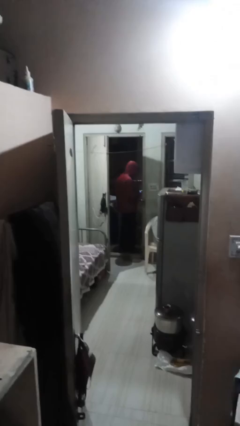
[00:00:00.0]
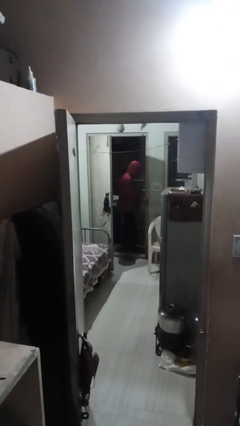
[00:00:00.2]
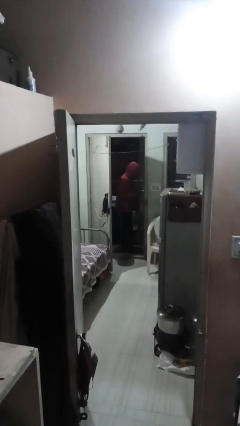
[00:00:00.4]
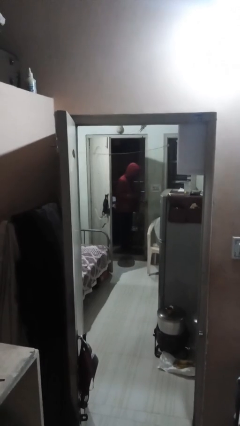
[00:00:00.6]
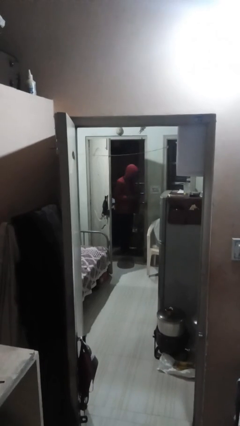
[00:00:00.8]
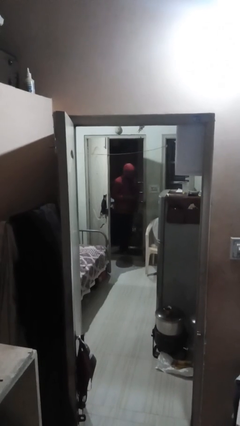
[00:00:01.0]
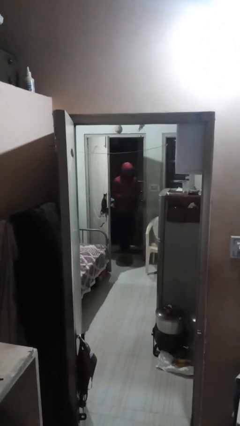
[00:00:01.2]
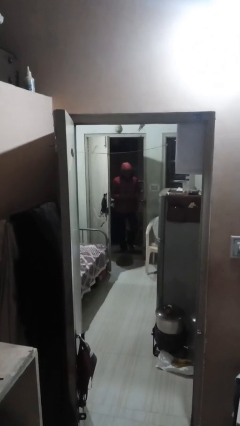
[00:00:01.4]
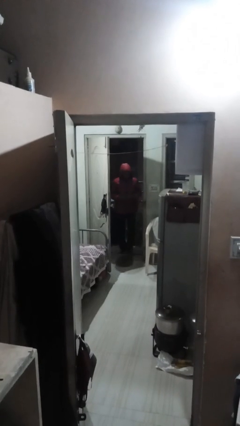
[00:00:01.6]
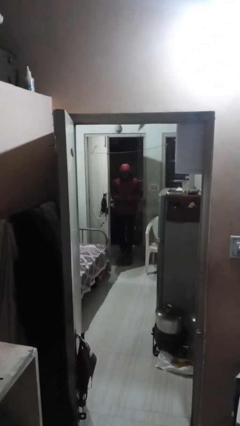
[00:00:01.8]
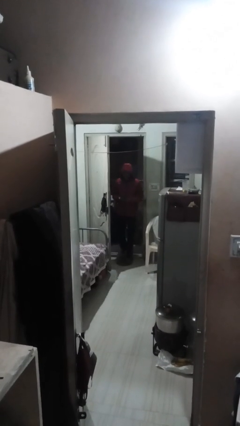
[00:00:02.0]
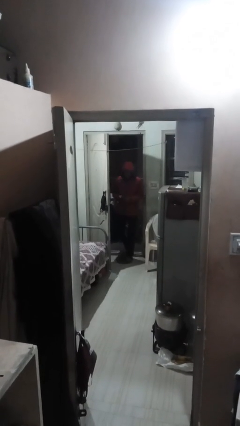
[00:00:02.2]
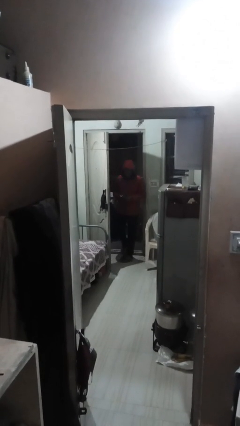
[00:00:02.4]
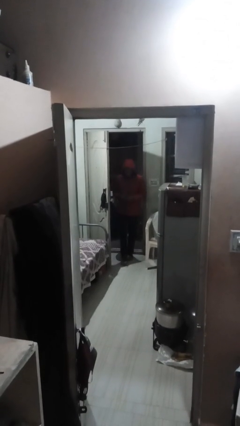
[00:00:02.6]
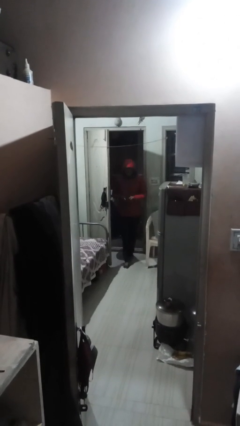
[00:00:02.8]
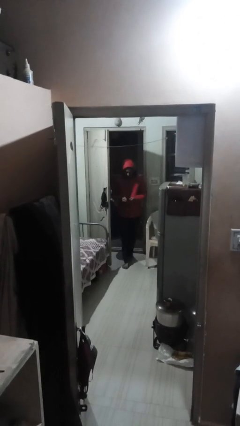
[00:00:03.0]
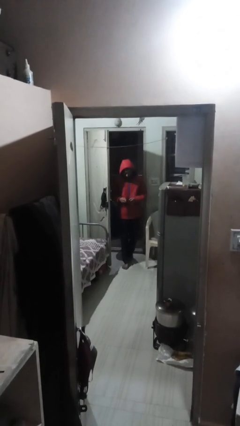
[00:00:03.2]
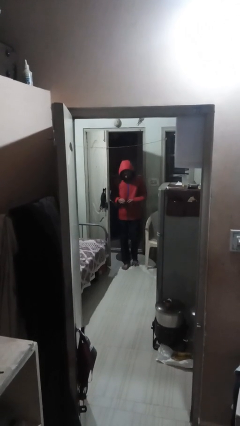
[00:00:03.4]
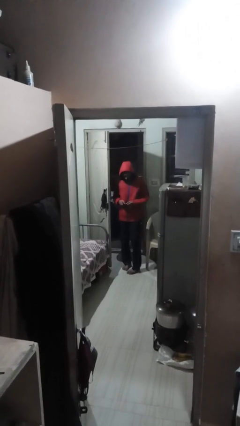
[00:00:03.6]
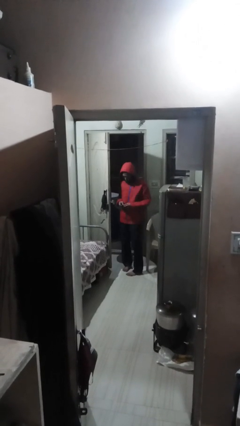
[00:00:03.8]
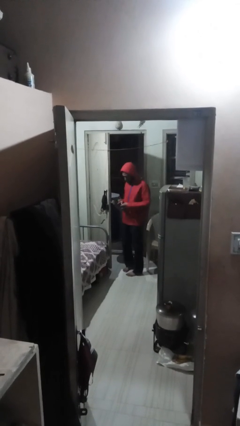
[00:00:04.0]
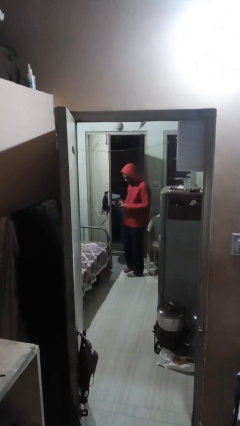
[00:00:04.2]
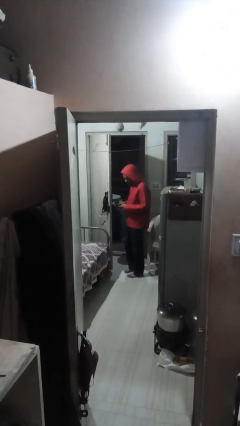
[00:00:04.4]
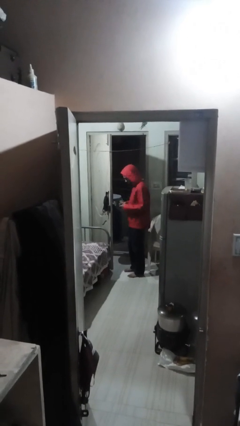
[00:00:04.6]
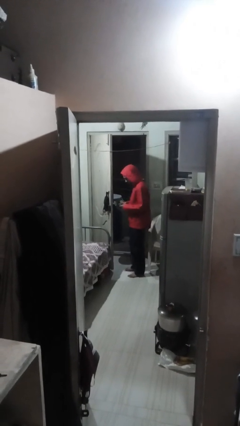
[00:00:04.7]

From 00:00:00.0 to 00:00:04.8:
person enters scene through structure

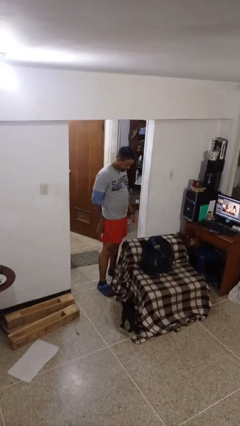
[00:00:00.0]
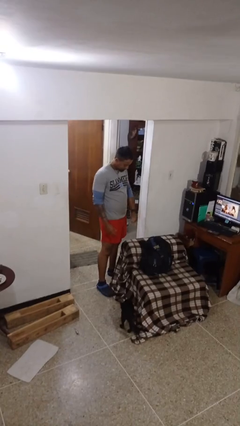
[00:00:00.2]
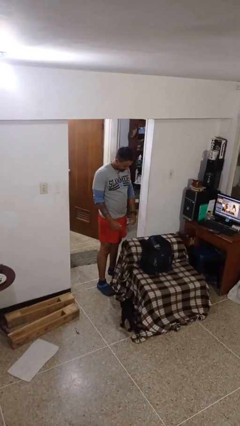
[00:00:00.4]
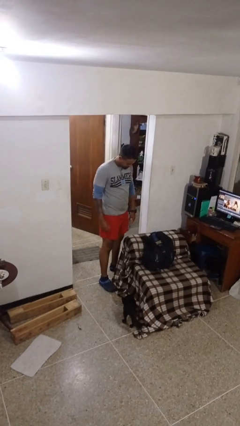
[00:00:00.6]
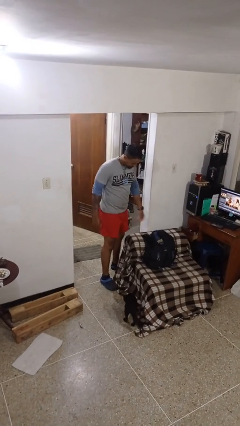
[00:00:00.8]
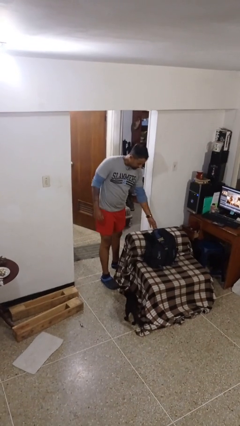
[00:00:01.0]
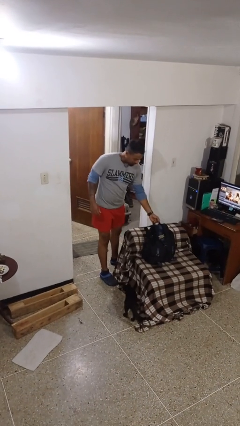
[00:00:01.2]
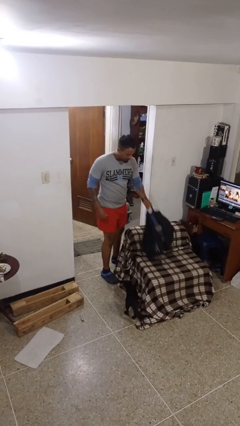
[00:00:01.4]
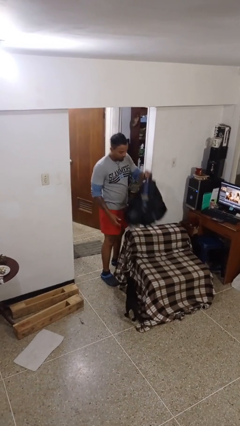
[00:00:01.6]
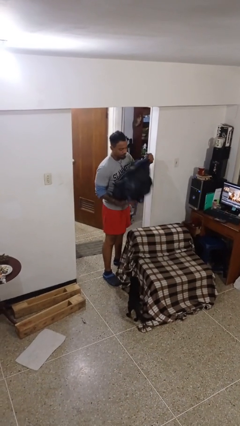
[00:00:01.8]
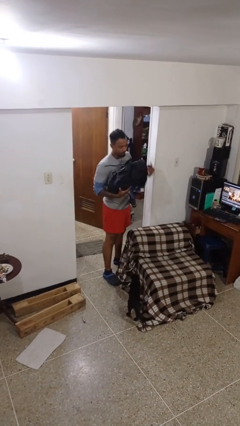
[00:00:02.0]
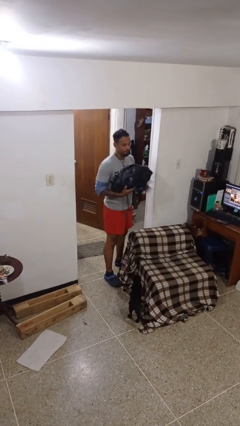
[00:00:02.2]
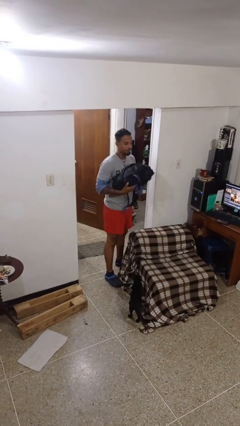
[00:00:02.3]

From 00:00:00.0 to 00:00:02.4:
person picks up object from couch

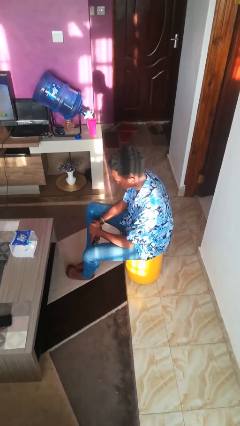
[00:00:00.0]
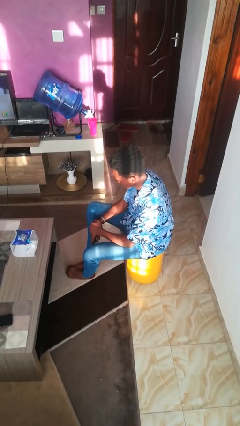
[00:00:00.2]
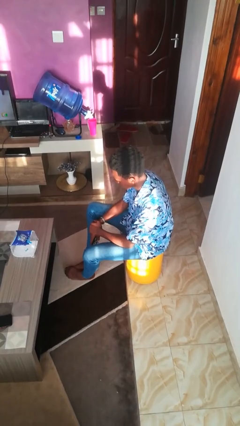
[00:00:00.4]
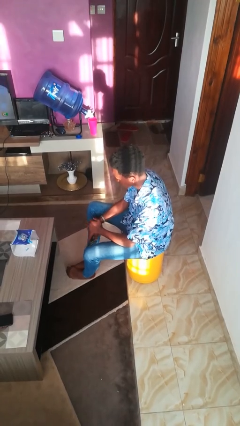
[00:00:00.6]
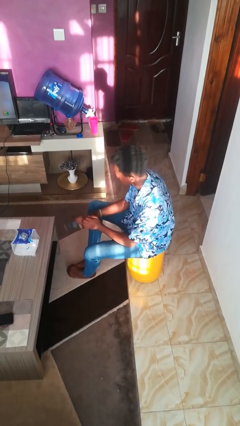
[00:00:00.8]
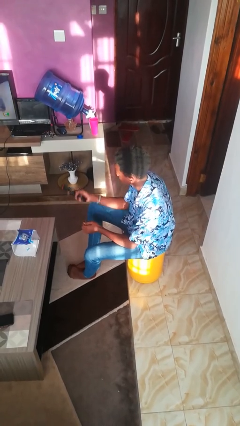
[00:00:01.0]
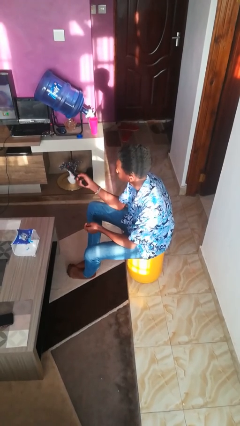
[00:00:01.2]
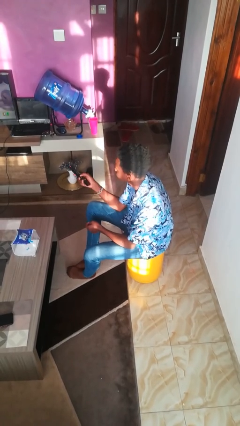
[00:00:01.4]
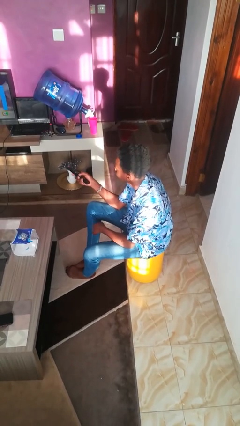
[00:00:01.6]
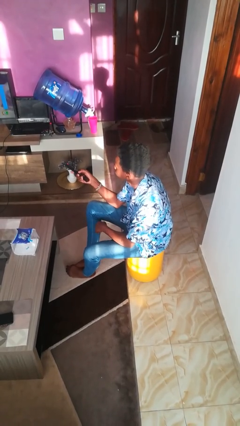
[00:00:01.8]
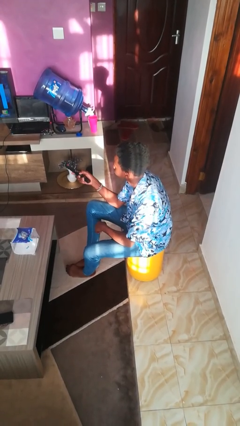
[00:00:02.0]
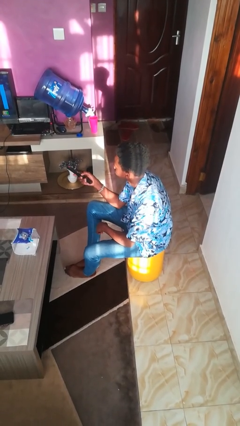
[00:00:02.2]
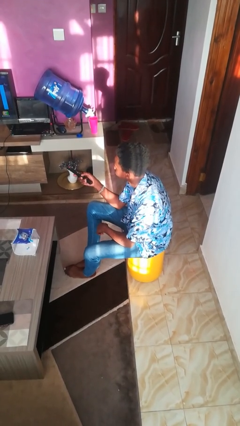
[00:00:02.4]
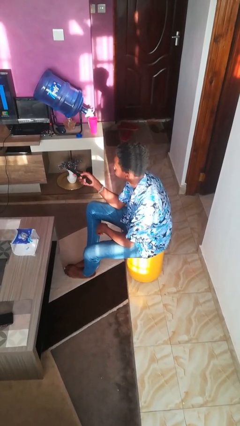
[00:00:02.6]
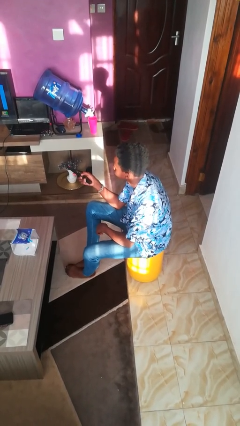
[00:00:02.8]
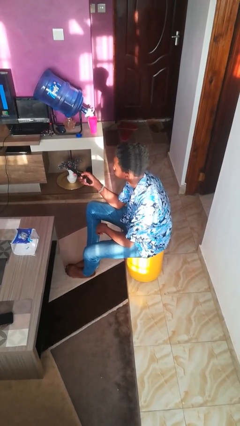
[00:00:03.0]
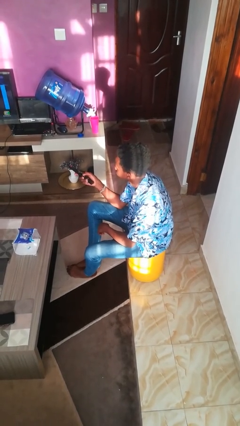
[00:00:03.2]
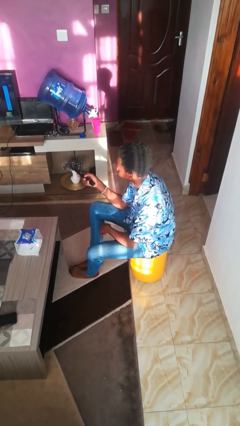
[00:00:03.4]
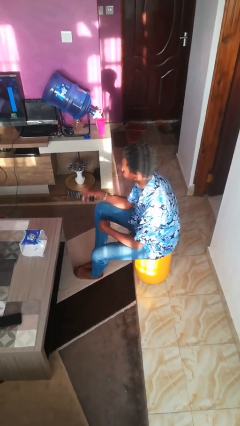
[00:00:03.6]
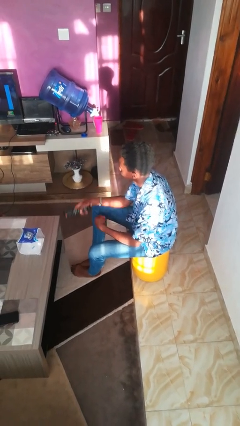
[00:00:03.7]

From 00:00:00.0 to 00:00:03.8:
person uses television remote

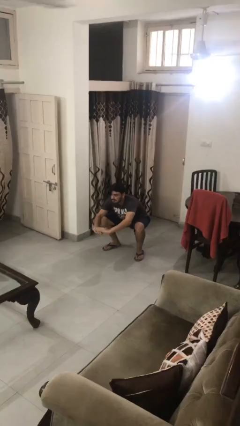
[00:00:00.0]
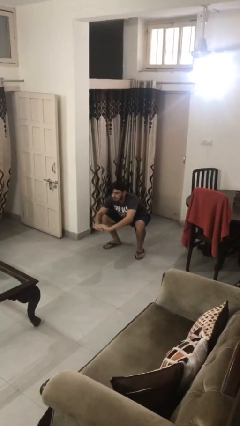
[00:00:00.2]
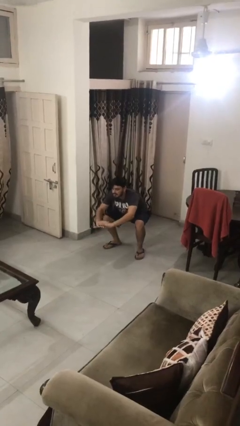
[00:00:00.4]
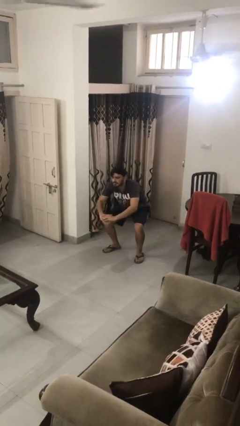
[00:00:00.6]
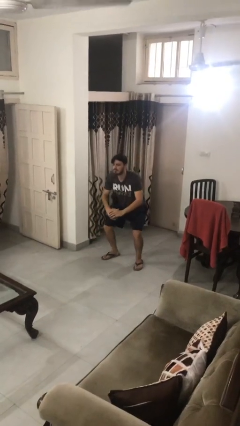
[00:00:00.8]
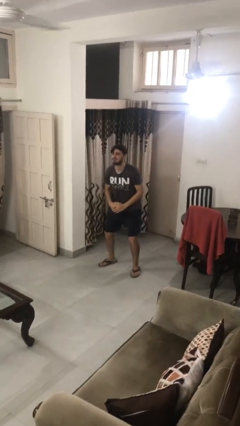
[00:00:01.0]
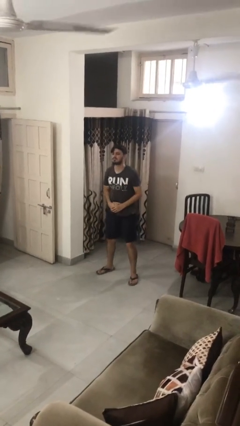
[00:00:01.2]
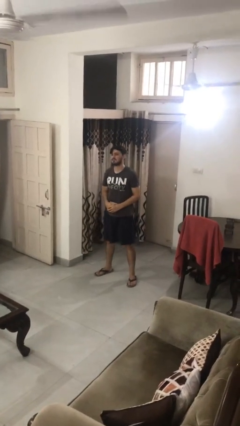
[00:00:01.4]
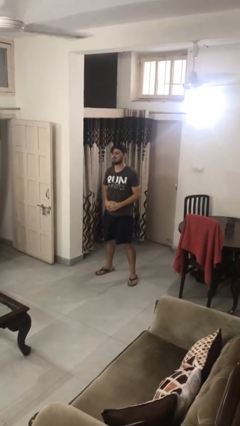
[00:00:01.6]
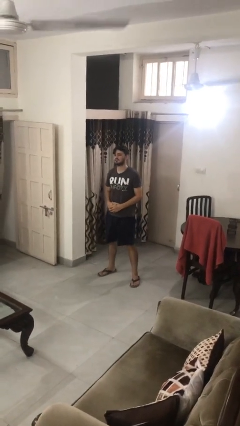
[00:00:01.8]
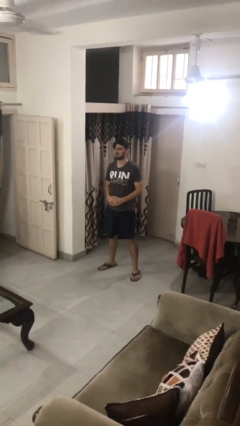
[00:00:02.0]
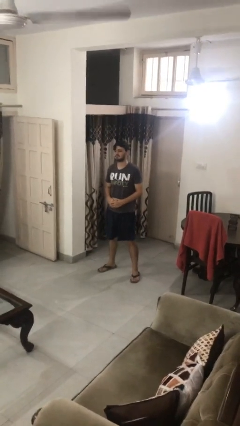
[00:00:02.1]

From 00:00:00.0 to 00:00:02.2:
person stands up

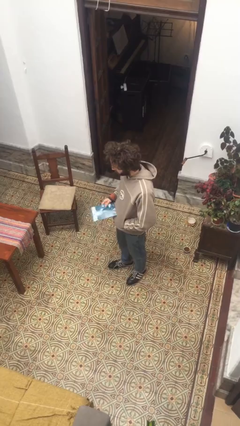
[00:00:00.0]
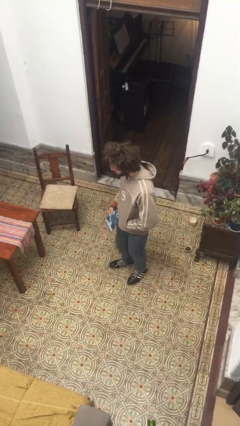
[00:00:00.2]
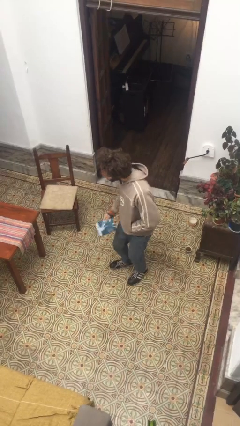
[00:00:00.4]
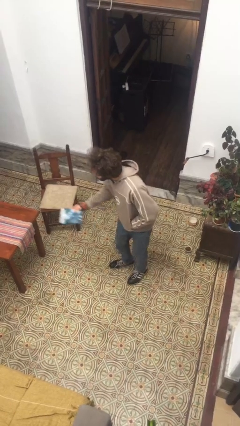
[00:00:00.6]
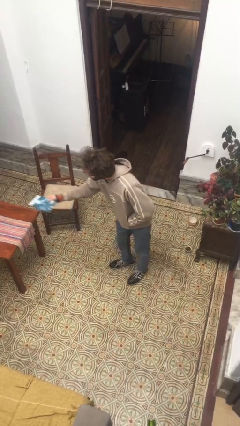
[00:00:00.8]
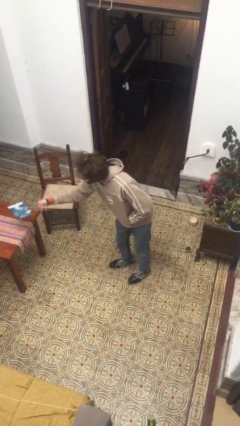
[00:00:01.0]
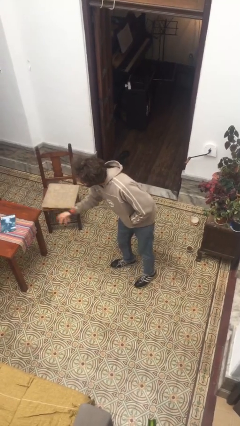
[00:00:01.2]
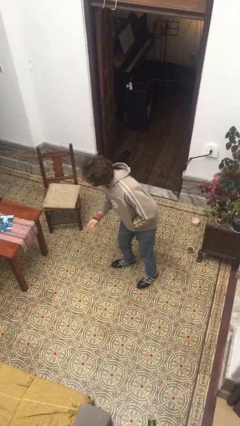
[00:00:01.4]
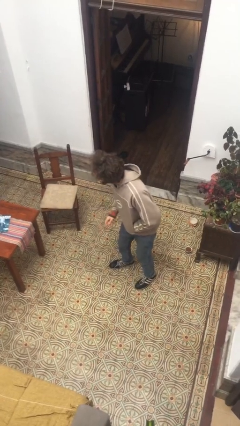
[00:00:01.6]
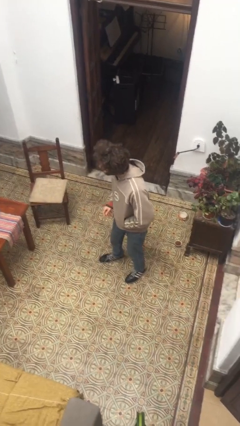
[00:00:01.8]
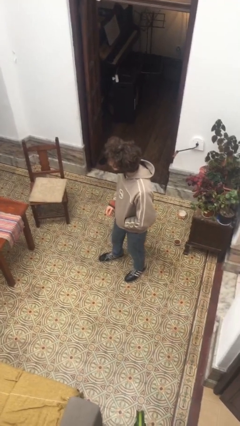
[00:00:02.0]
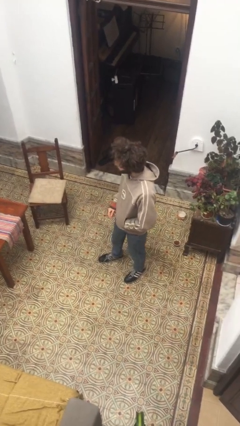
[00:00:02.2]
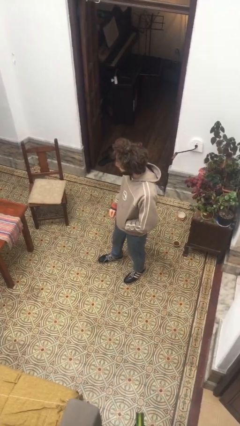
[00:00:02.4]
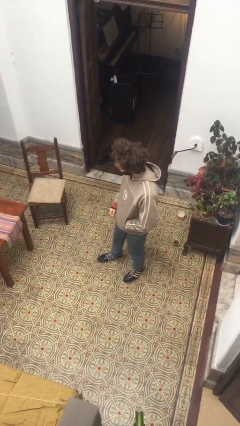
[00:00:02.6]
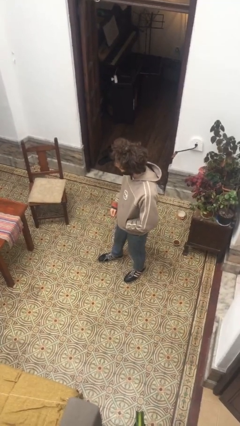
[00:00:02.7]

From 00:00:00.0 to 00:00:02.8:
person throws object on bed

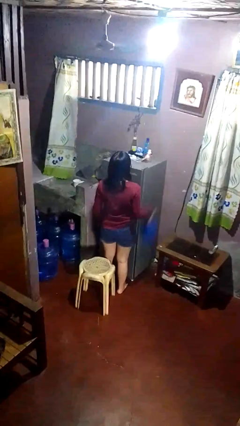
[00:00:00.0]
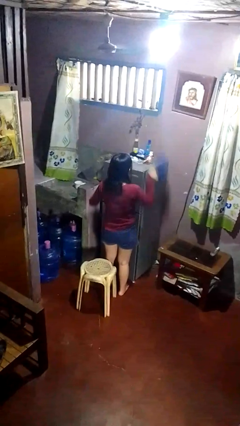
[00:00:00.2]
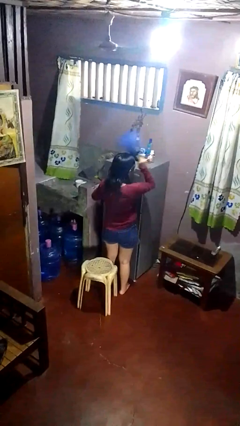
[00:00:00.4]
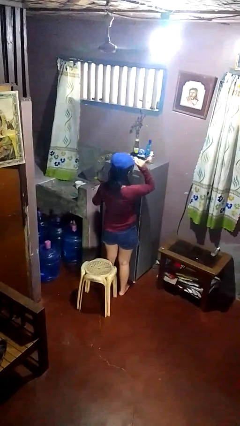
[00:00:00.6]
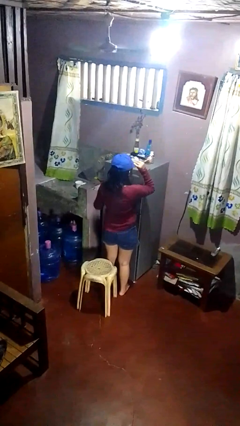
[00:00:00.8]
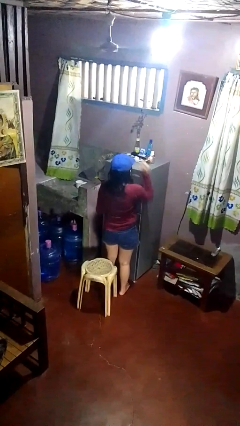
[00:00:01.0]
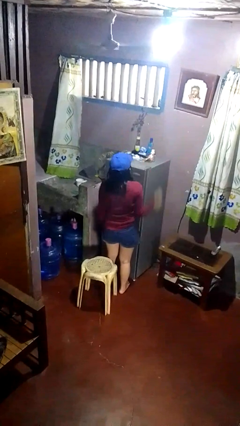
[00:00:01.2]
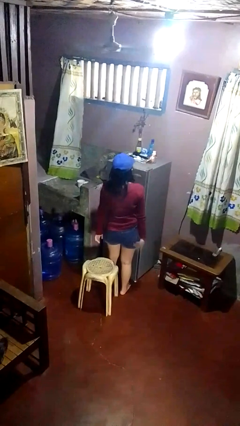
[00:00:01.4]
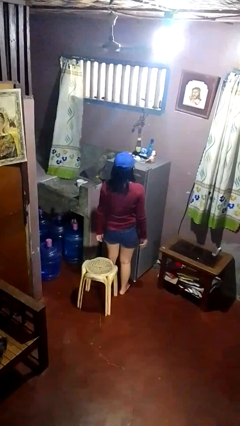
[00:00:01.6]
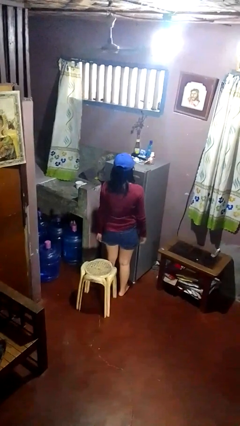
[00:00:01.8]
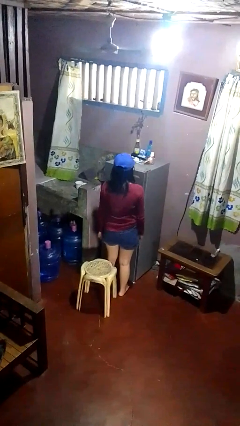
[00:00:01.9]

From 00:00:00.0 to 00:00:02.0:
person puts on hat
